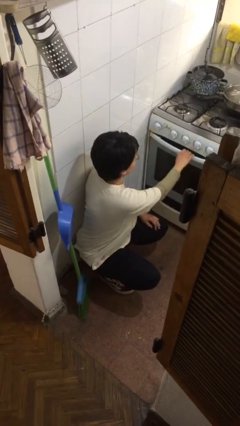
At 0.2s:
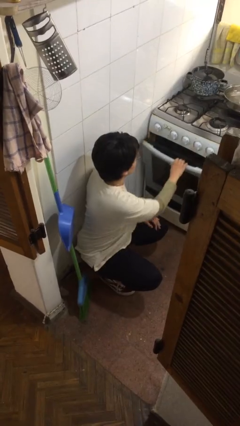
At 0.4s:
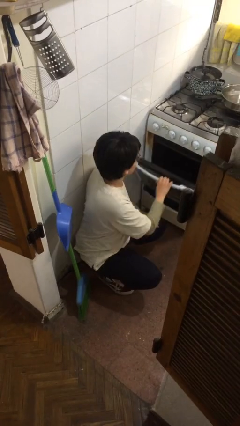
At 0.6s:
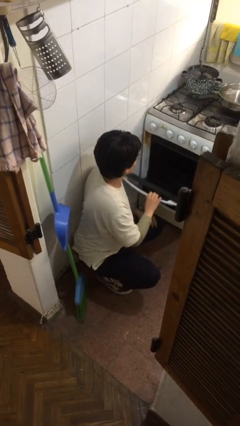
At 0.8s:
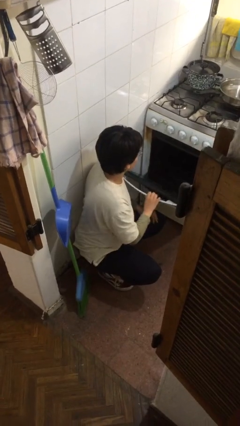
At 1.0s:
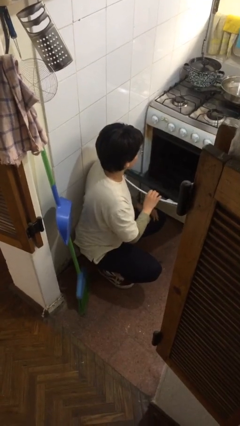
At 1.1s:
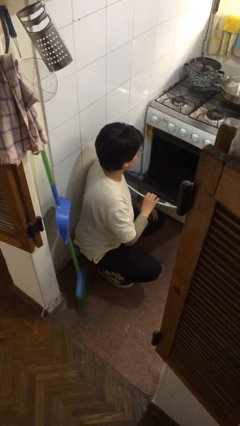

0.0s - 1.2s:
person opens oven door

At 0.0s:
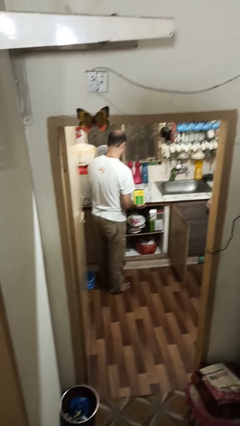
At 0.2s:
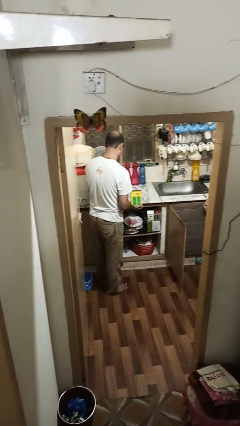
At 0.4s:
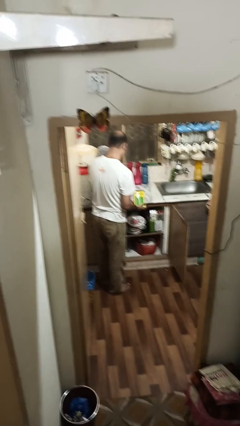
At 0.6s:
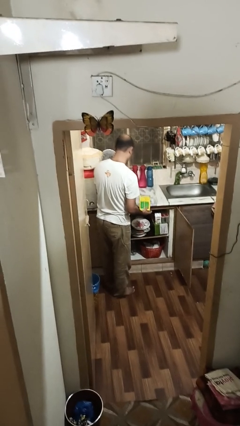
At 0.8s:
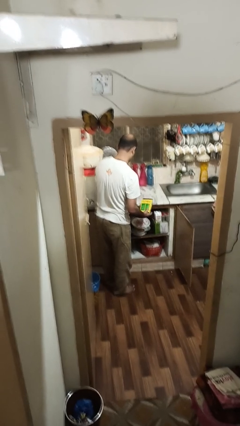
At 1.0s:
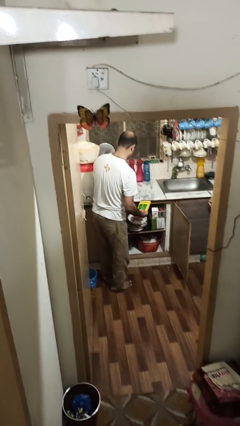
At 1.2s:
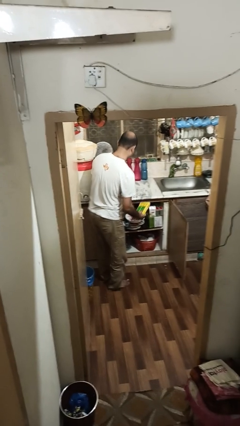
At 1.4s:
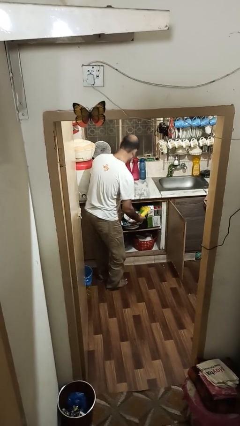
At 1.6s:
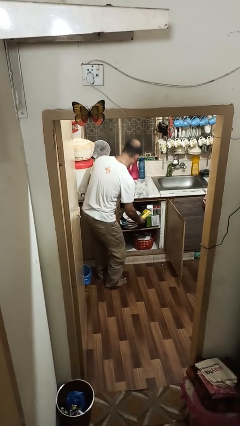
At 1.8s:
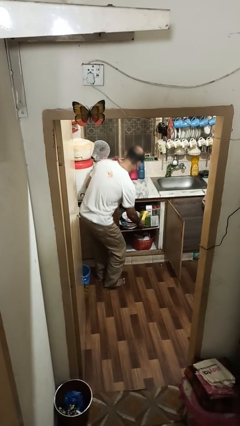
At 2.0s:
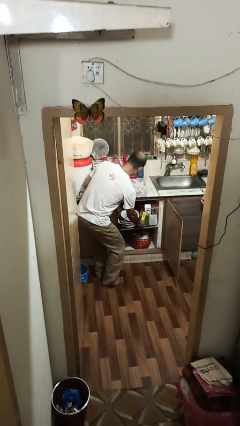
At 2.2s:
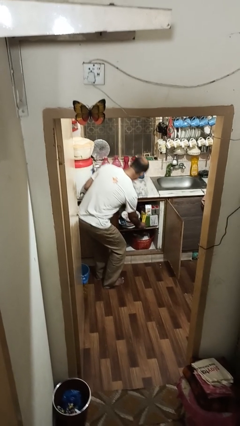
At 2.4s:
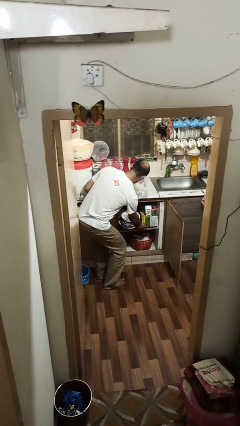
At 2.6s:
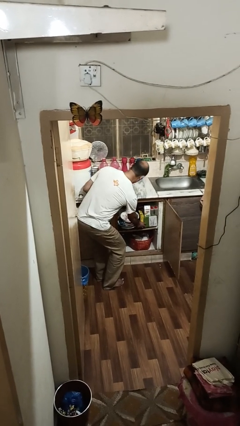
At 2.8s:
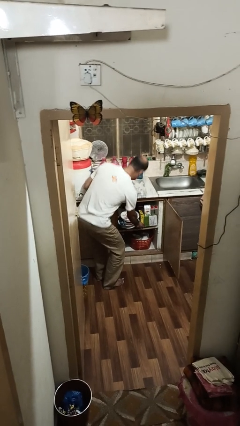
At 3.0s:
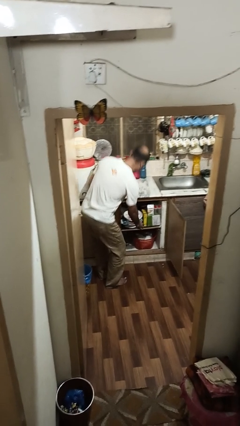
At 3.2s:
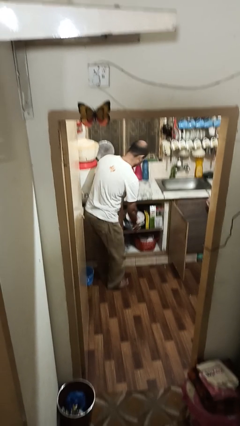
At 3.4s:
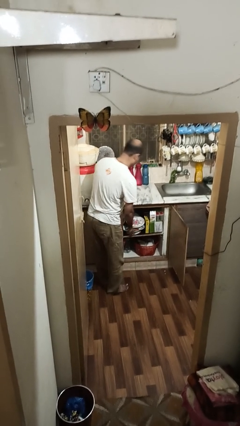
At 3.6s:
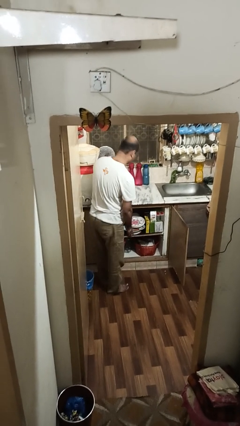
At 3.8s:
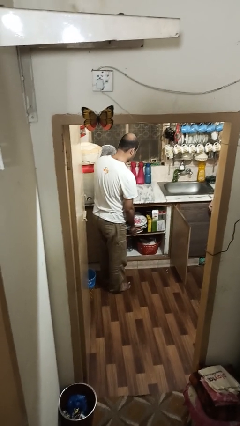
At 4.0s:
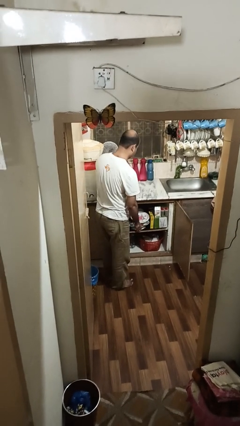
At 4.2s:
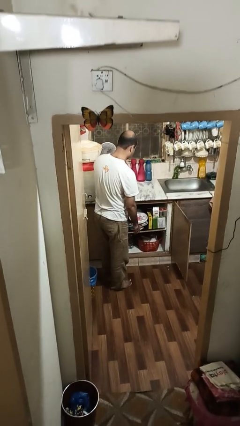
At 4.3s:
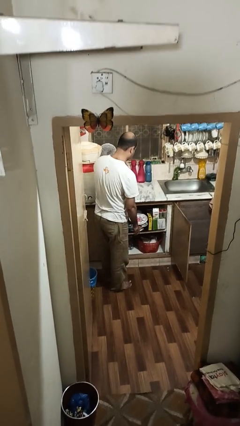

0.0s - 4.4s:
person puts object in cabinet

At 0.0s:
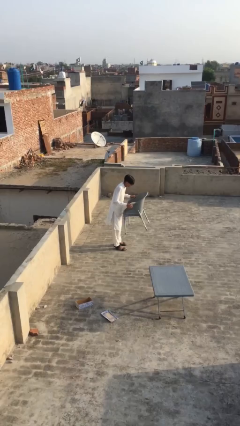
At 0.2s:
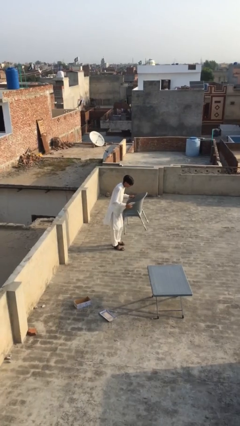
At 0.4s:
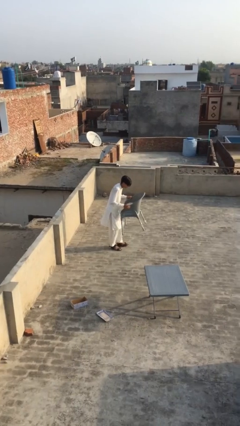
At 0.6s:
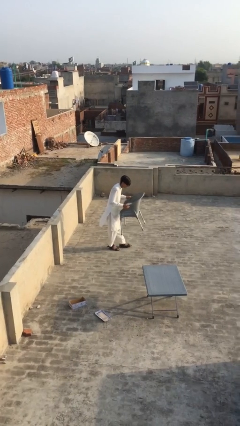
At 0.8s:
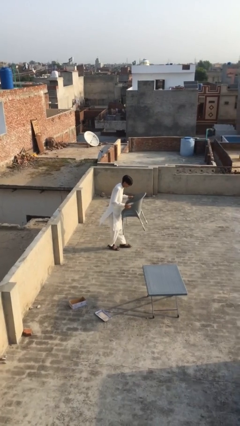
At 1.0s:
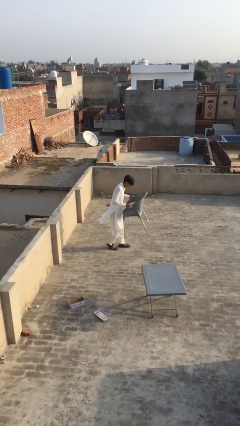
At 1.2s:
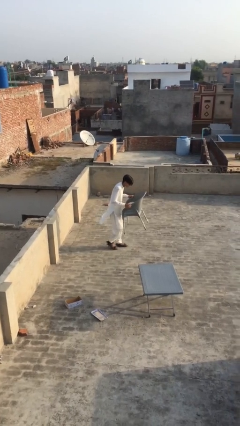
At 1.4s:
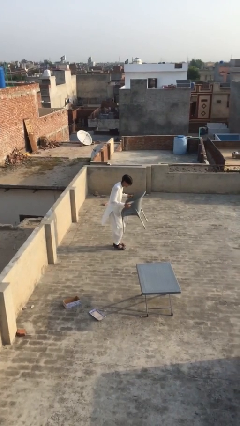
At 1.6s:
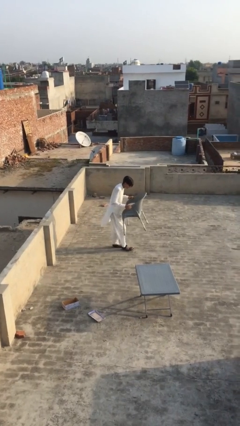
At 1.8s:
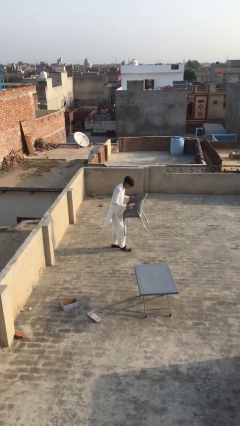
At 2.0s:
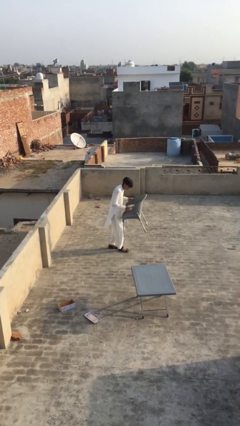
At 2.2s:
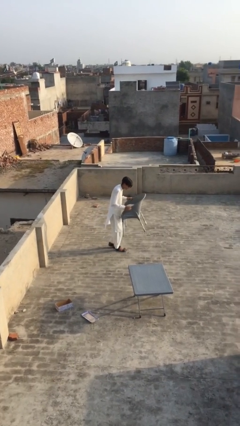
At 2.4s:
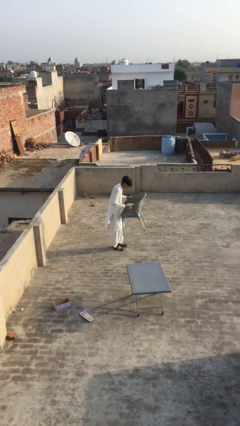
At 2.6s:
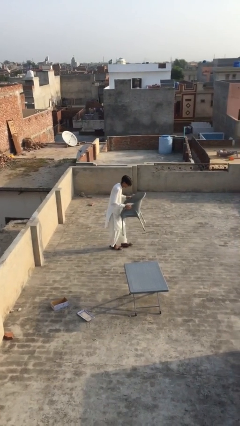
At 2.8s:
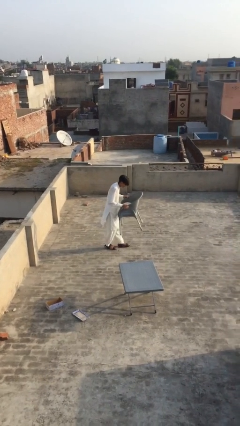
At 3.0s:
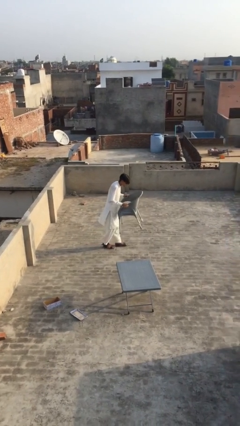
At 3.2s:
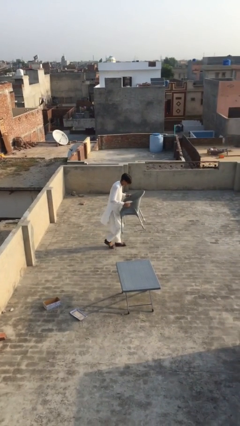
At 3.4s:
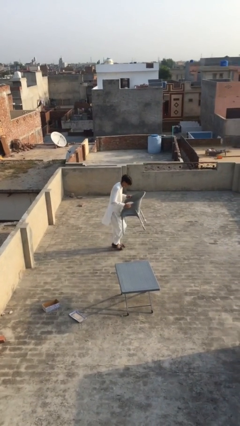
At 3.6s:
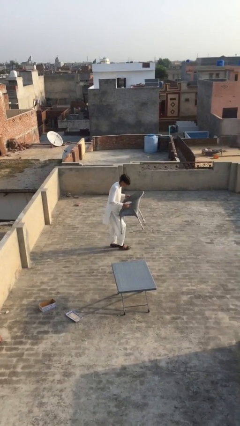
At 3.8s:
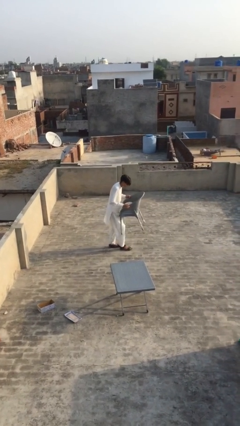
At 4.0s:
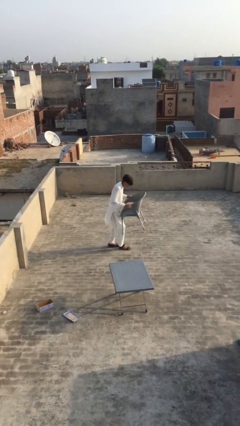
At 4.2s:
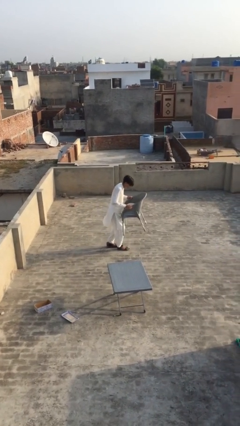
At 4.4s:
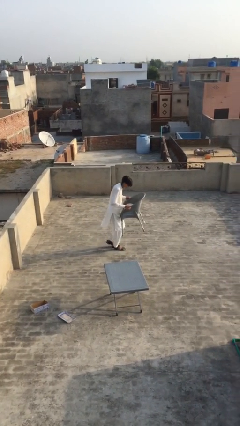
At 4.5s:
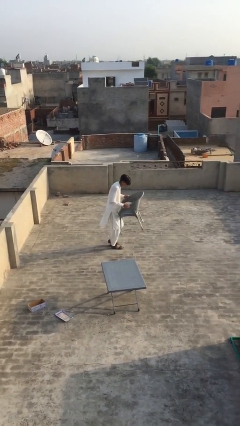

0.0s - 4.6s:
person carries heavy object

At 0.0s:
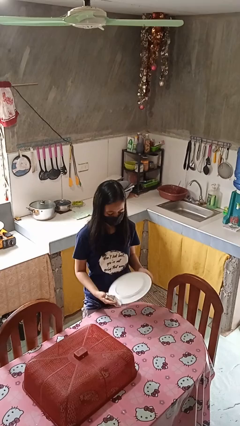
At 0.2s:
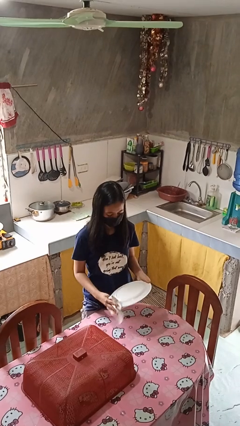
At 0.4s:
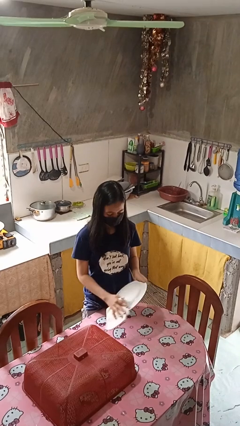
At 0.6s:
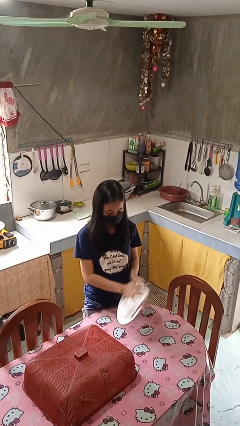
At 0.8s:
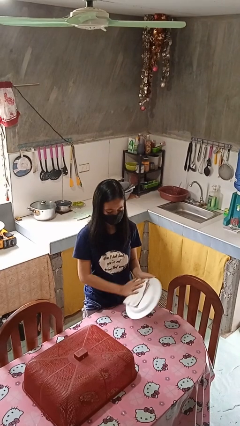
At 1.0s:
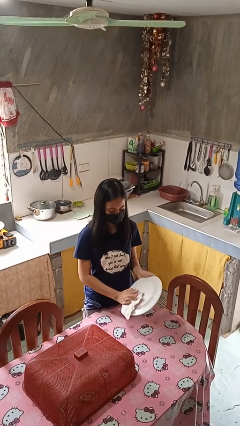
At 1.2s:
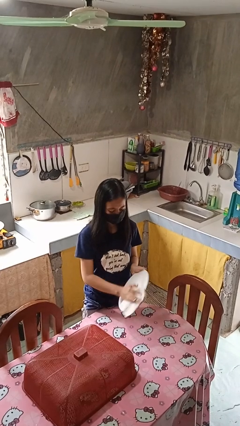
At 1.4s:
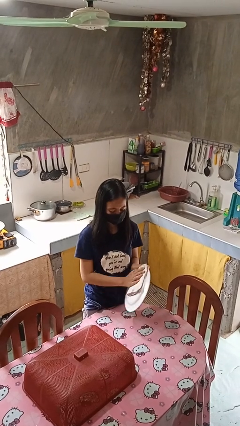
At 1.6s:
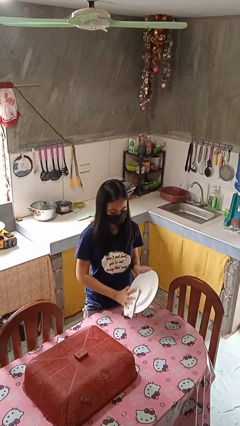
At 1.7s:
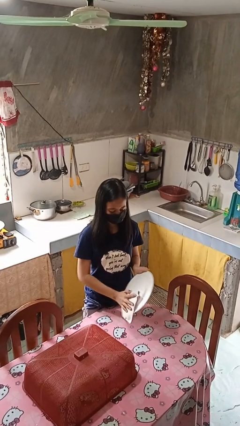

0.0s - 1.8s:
person dries dish

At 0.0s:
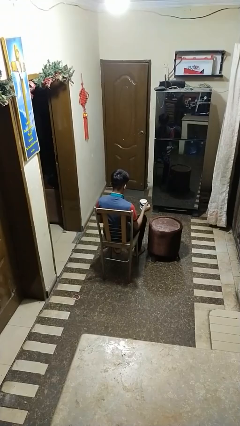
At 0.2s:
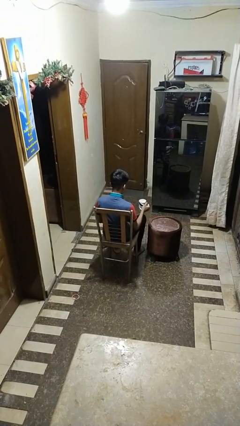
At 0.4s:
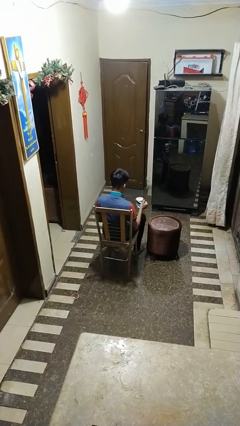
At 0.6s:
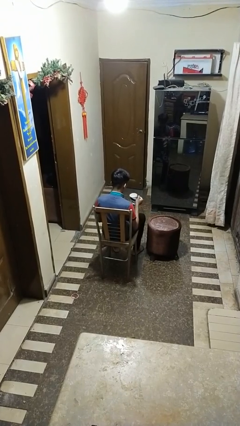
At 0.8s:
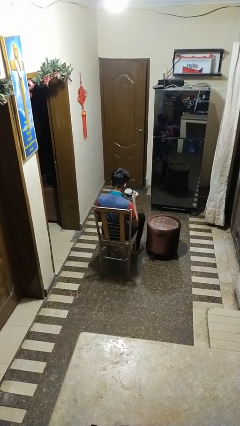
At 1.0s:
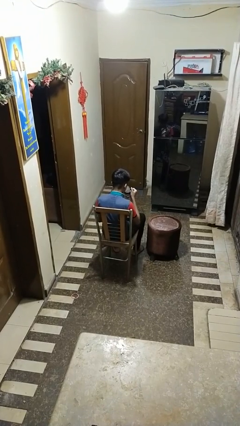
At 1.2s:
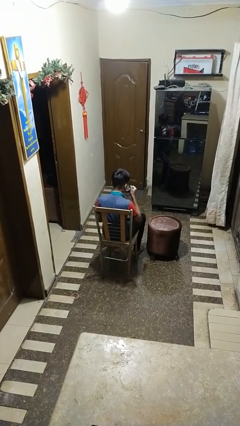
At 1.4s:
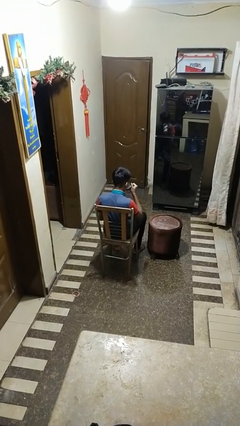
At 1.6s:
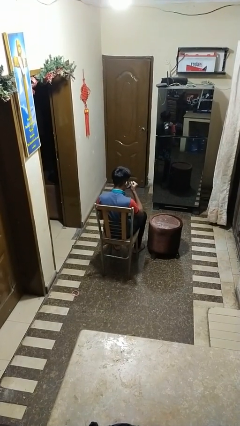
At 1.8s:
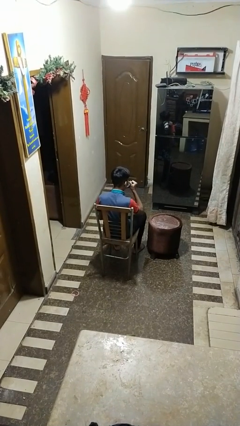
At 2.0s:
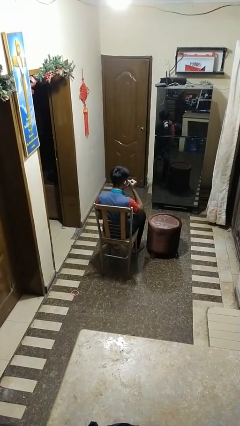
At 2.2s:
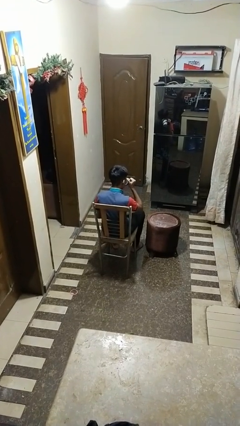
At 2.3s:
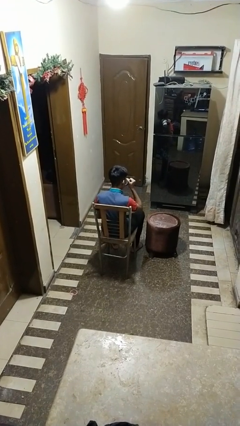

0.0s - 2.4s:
person drinks from mug

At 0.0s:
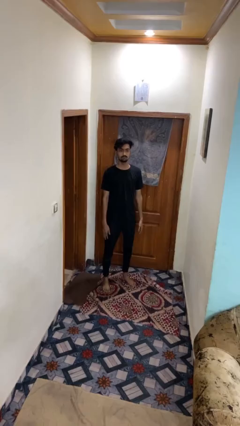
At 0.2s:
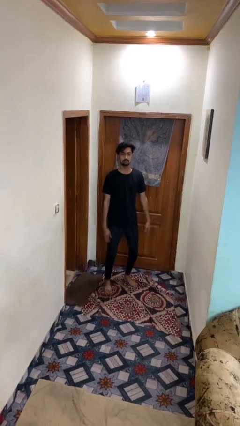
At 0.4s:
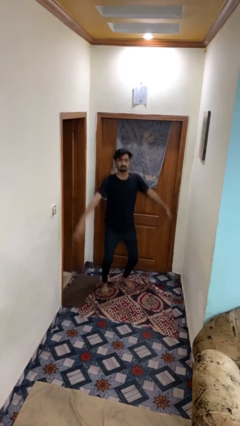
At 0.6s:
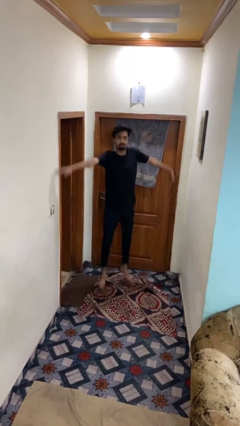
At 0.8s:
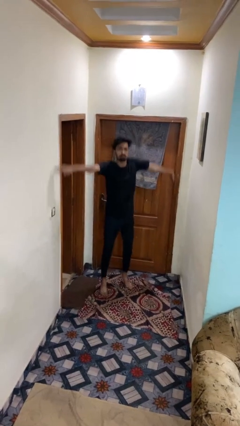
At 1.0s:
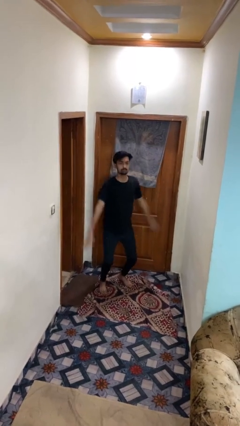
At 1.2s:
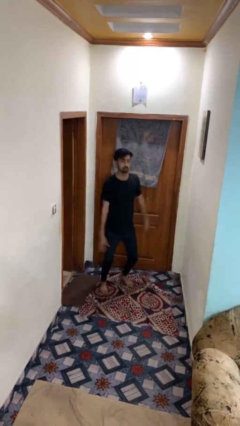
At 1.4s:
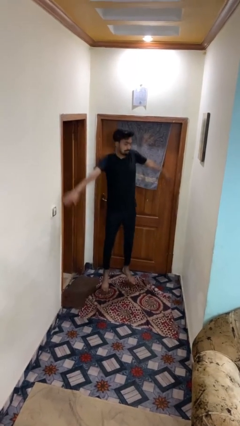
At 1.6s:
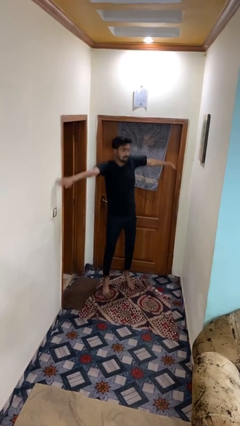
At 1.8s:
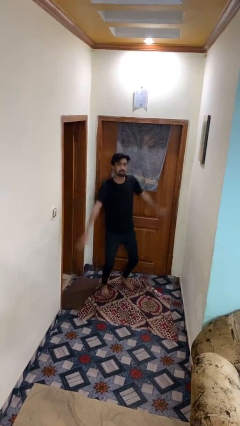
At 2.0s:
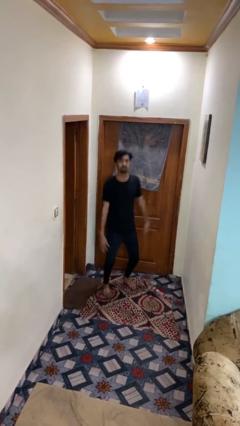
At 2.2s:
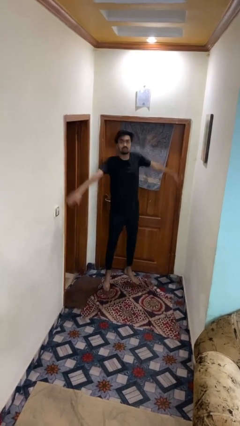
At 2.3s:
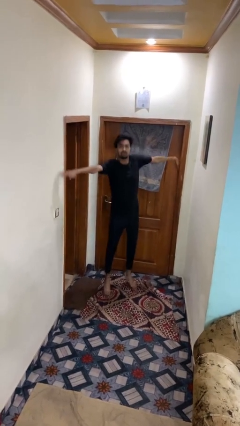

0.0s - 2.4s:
person exercises with jumping jacks

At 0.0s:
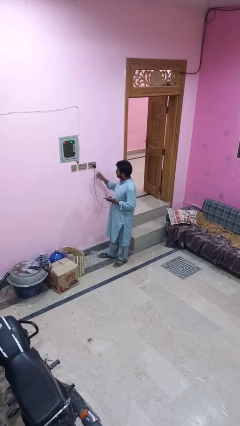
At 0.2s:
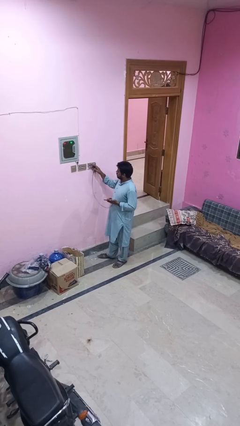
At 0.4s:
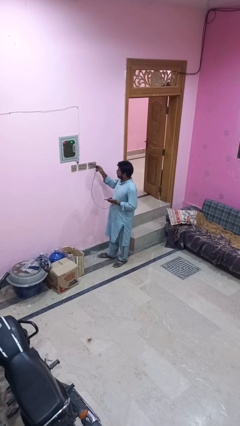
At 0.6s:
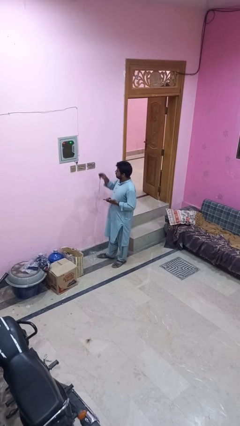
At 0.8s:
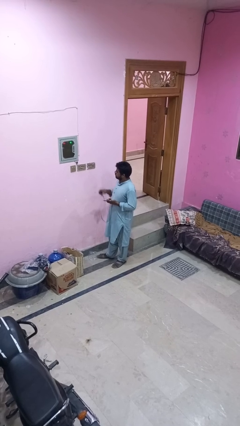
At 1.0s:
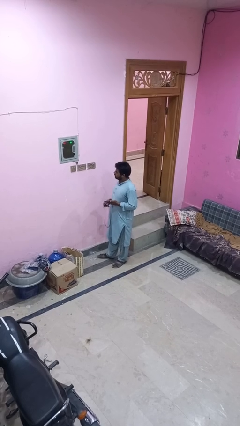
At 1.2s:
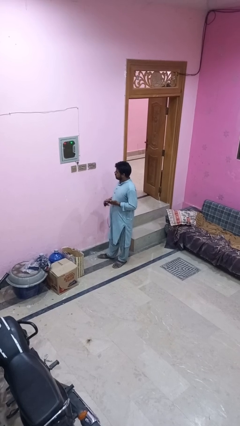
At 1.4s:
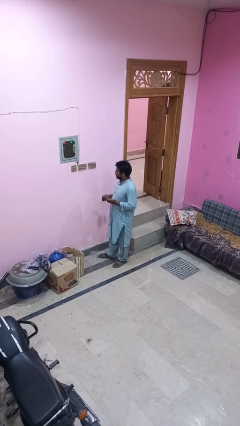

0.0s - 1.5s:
person unplugs from electrical socket
